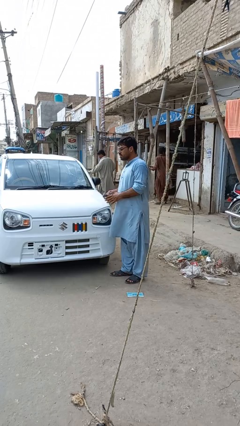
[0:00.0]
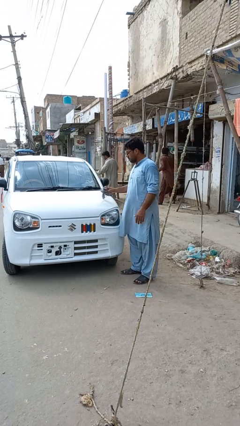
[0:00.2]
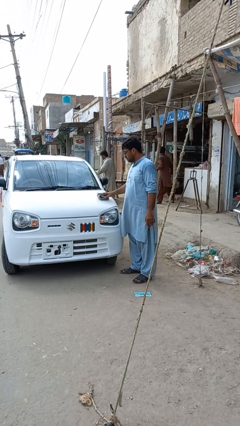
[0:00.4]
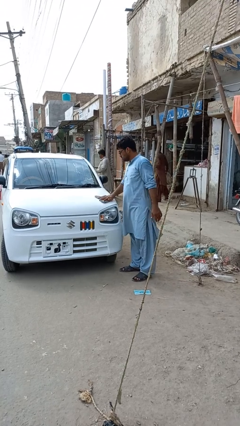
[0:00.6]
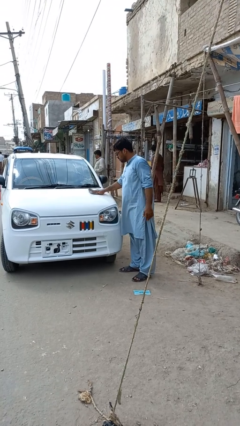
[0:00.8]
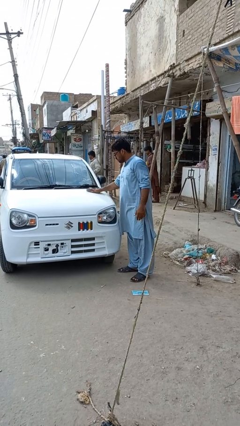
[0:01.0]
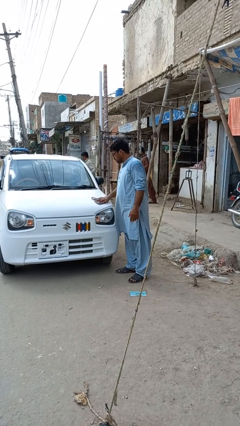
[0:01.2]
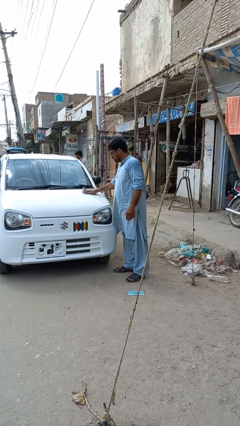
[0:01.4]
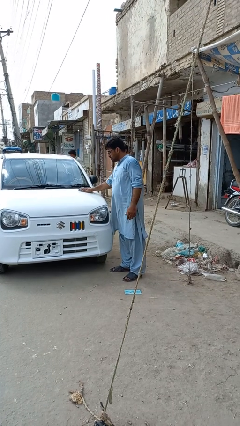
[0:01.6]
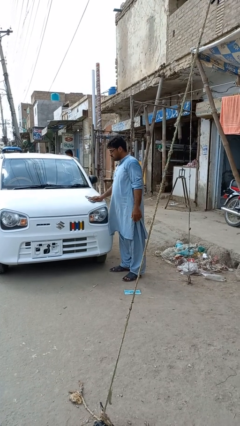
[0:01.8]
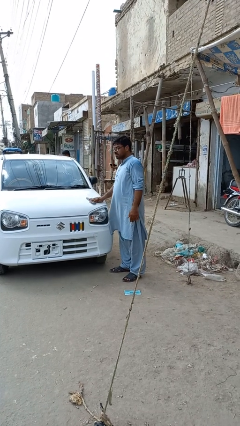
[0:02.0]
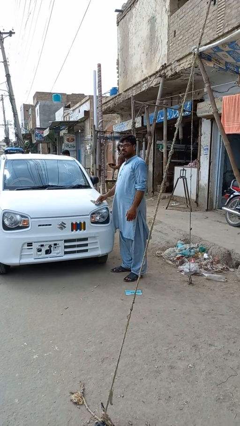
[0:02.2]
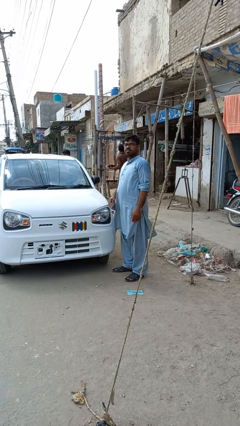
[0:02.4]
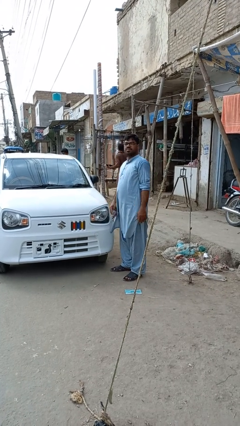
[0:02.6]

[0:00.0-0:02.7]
person polishes car with rag

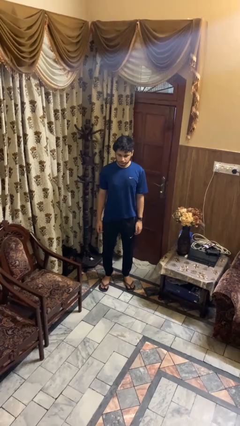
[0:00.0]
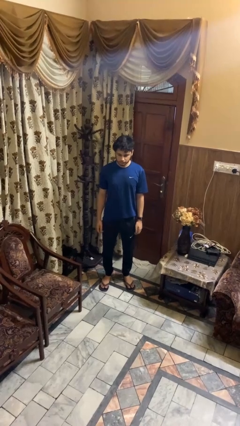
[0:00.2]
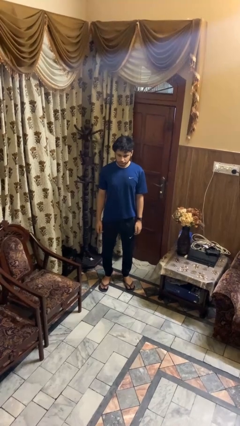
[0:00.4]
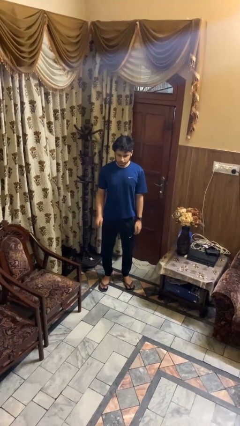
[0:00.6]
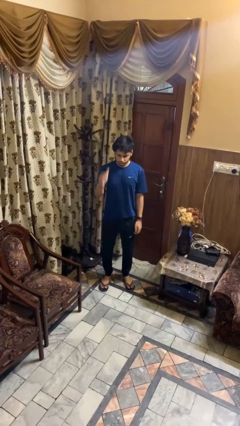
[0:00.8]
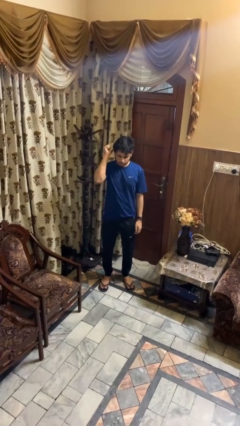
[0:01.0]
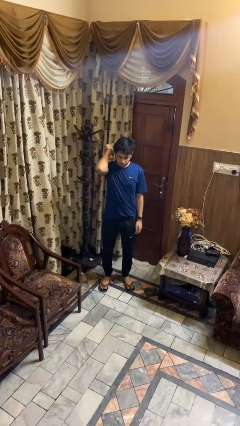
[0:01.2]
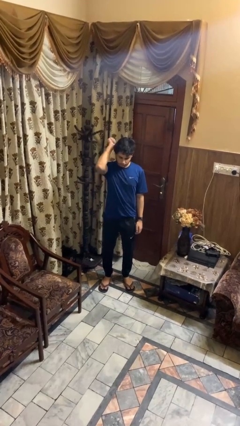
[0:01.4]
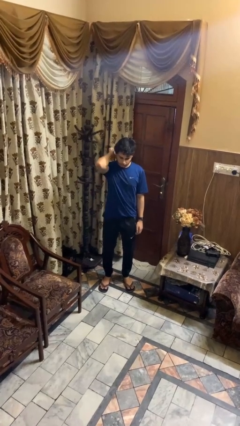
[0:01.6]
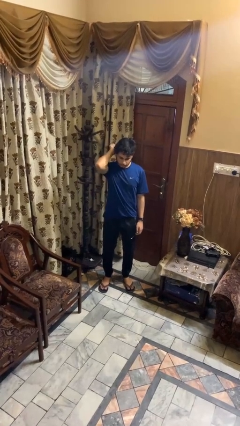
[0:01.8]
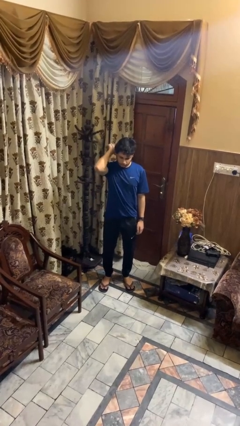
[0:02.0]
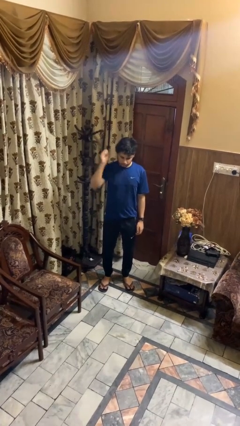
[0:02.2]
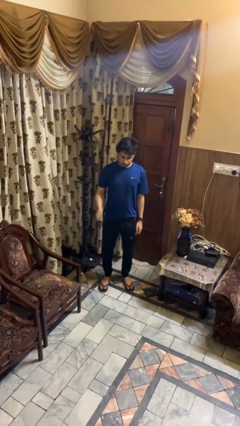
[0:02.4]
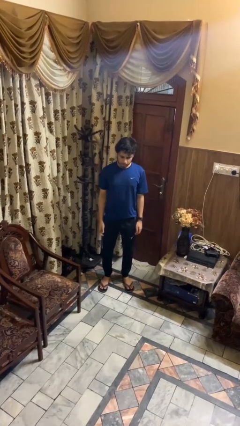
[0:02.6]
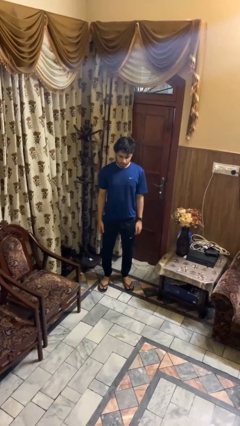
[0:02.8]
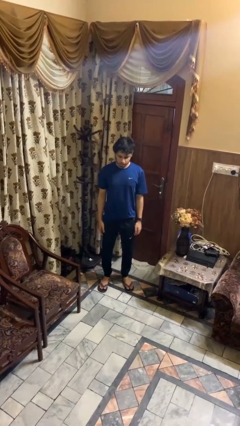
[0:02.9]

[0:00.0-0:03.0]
person gestures behind me

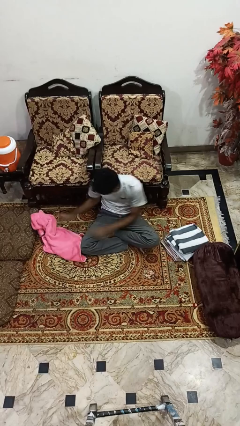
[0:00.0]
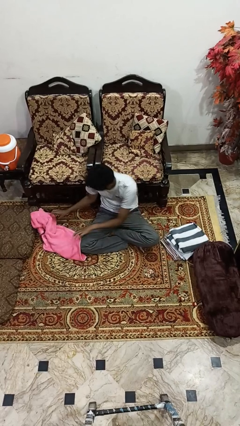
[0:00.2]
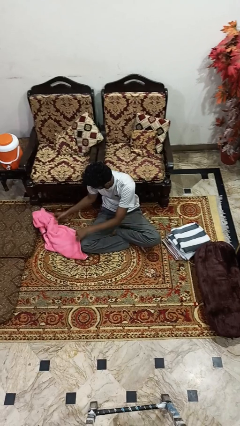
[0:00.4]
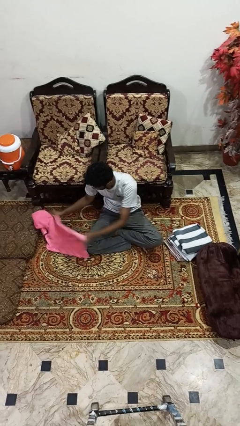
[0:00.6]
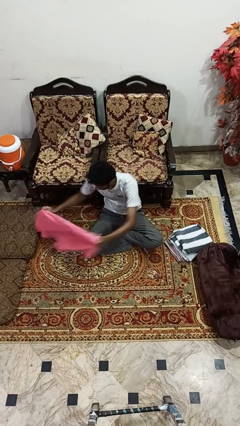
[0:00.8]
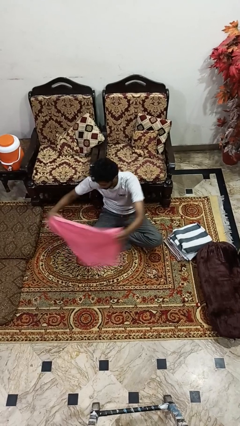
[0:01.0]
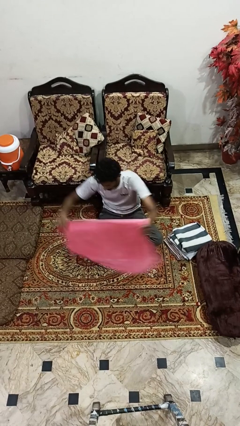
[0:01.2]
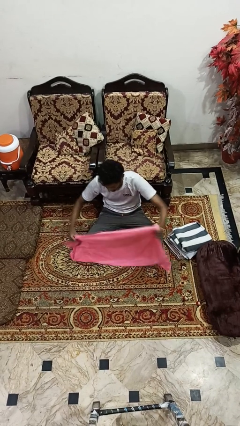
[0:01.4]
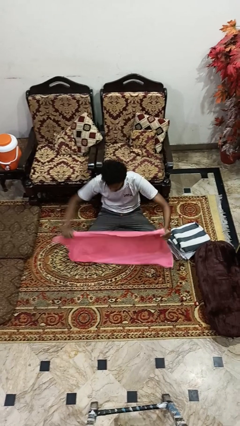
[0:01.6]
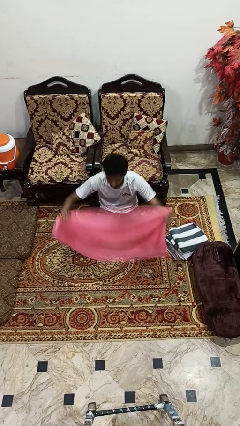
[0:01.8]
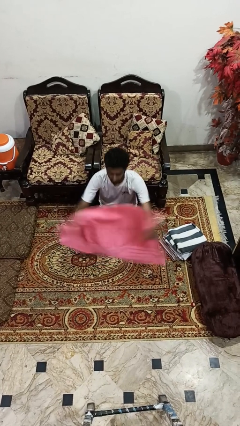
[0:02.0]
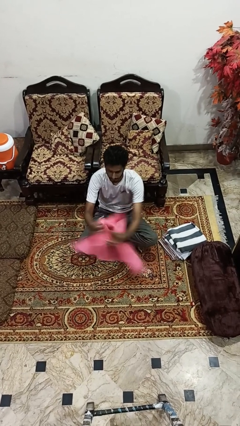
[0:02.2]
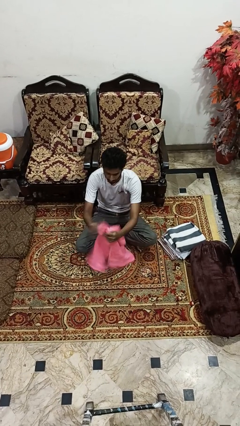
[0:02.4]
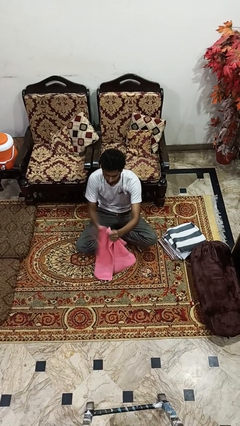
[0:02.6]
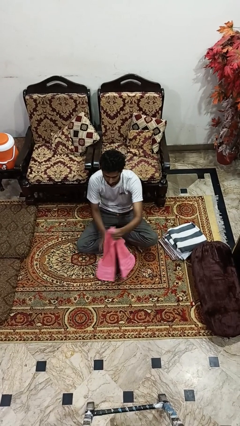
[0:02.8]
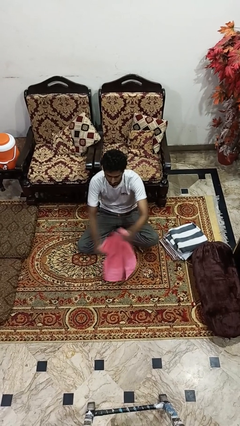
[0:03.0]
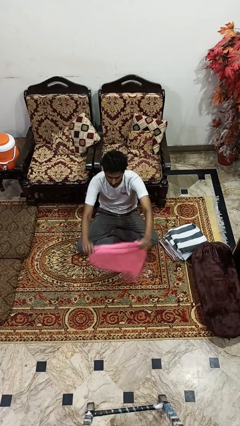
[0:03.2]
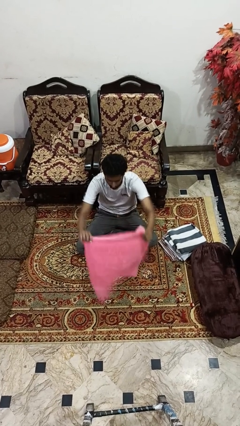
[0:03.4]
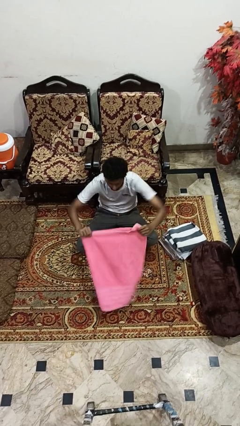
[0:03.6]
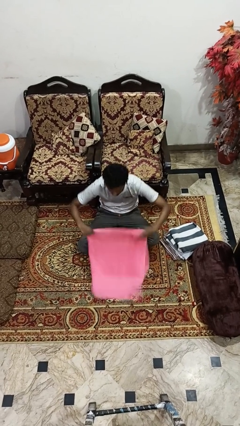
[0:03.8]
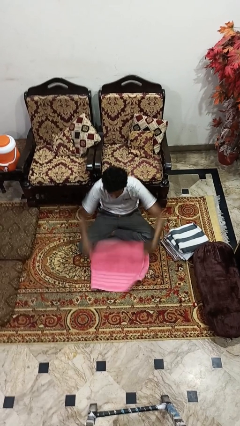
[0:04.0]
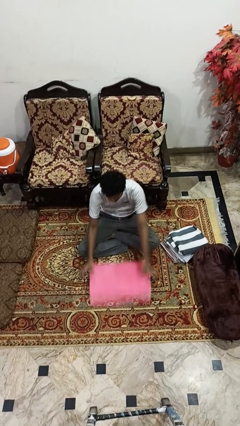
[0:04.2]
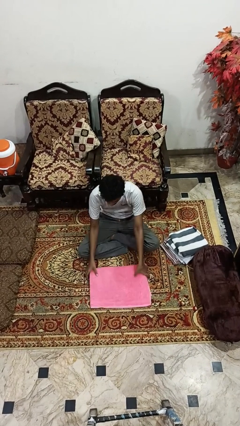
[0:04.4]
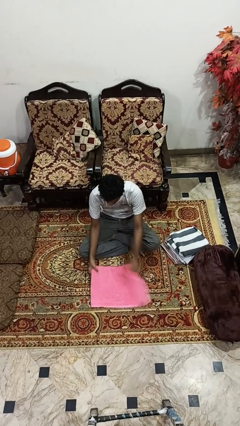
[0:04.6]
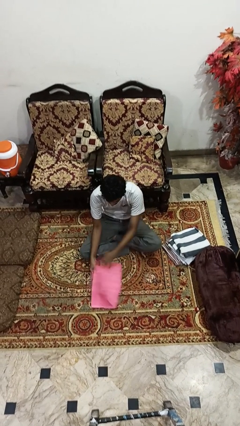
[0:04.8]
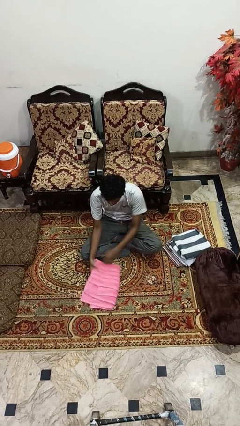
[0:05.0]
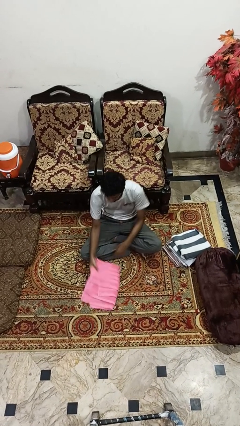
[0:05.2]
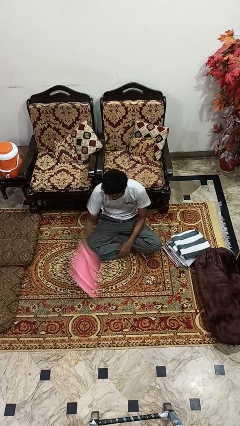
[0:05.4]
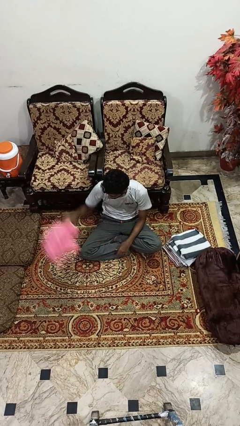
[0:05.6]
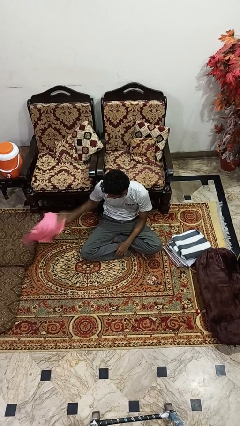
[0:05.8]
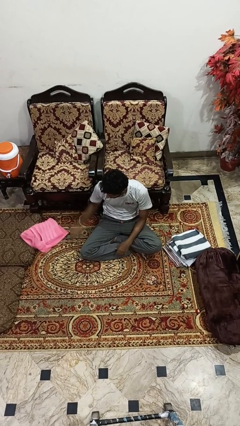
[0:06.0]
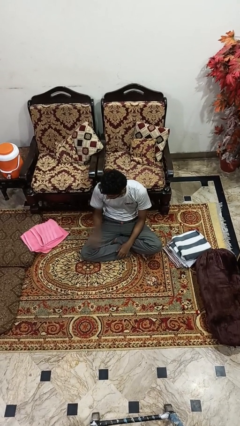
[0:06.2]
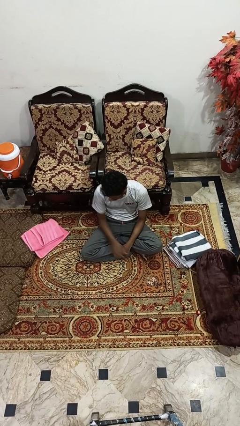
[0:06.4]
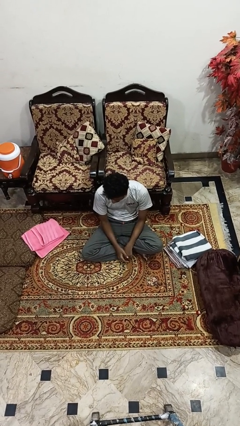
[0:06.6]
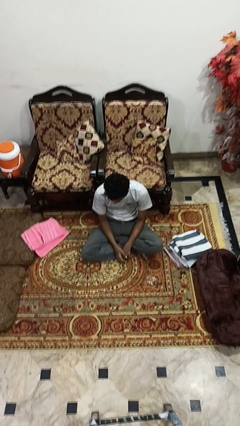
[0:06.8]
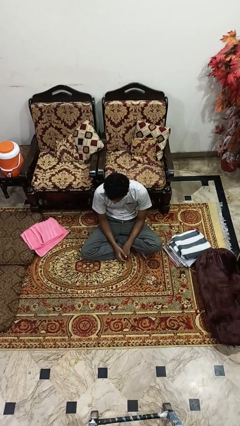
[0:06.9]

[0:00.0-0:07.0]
person folds towel

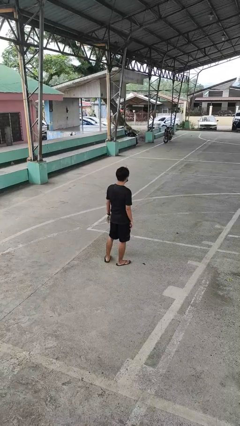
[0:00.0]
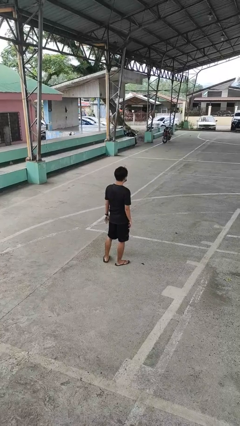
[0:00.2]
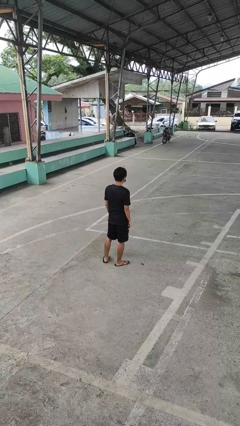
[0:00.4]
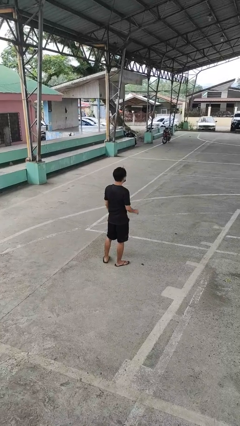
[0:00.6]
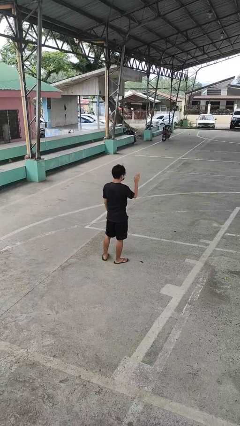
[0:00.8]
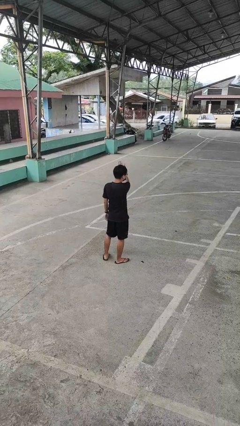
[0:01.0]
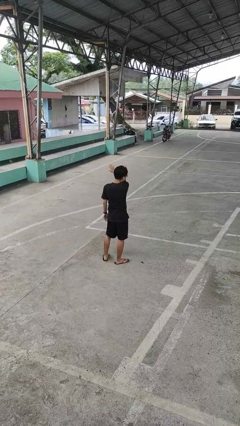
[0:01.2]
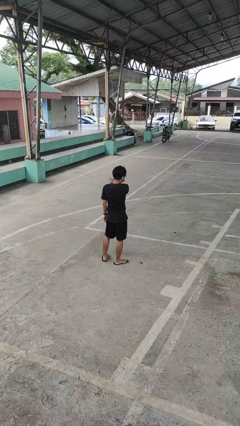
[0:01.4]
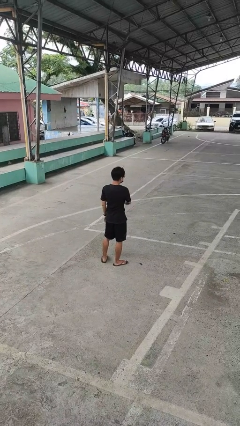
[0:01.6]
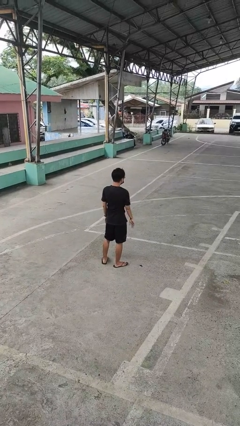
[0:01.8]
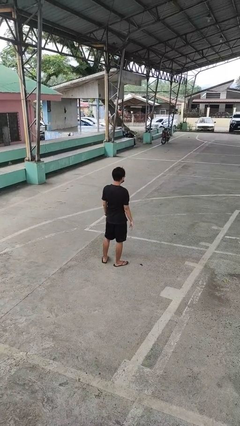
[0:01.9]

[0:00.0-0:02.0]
person gestures swipe left

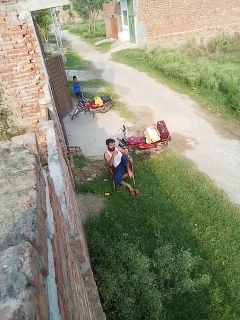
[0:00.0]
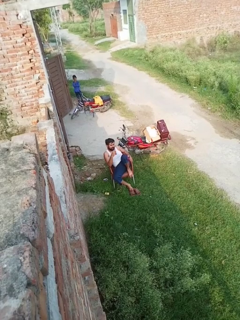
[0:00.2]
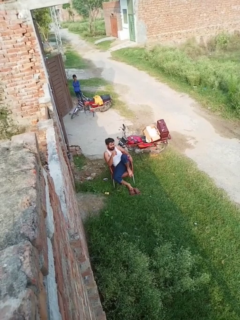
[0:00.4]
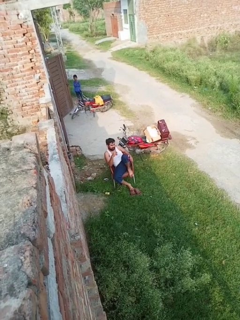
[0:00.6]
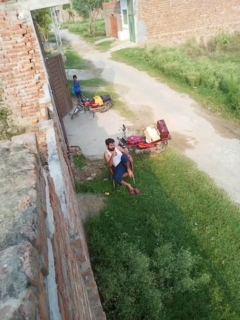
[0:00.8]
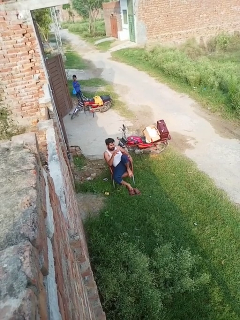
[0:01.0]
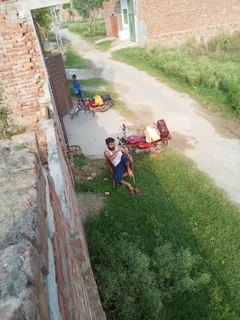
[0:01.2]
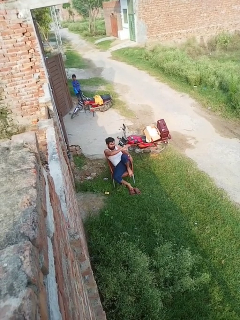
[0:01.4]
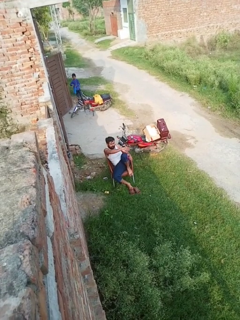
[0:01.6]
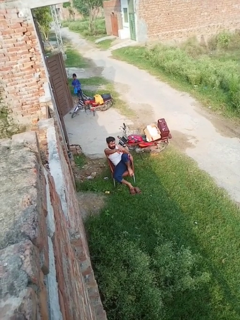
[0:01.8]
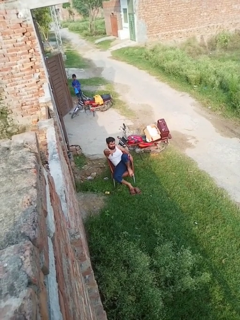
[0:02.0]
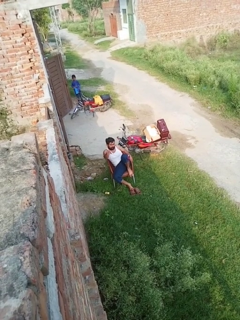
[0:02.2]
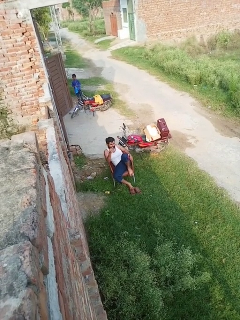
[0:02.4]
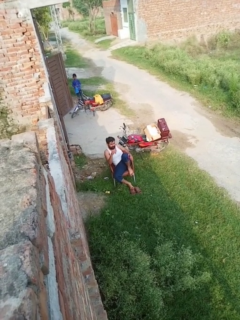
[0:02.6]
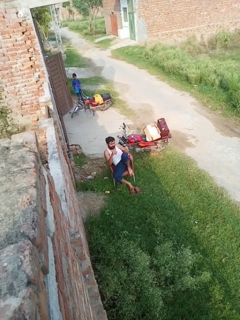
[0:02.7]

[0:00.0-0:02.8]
person gestures swipe right

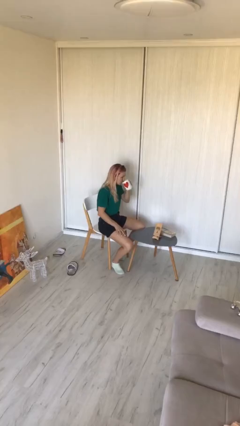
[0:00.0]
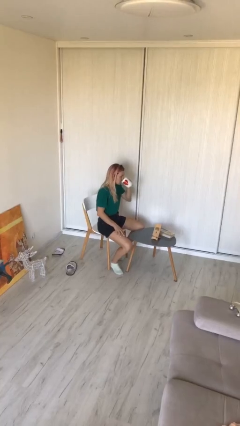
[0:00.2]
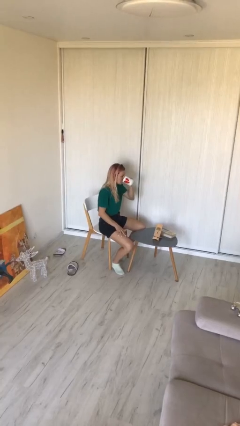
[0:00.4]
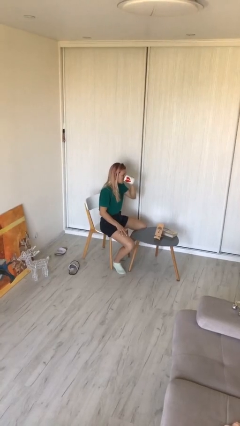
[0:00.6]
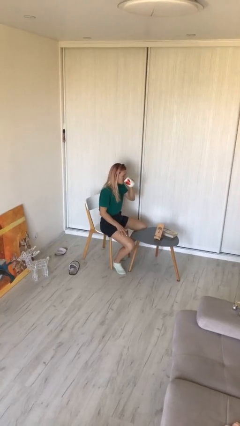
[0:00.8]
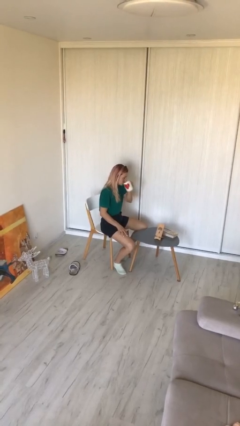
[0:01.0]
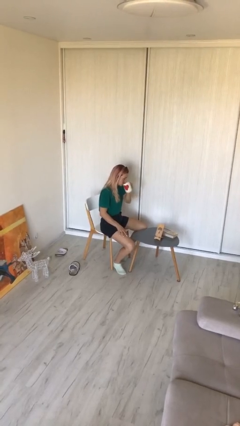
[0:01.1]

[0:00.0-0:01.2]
person drinks from mug
